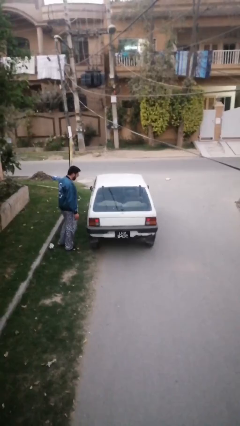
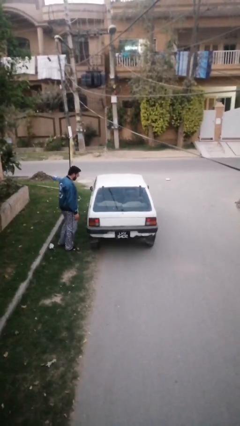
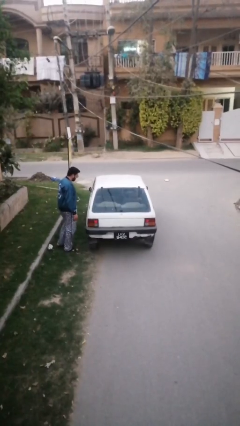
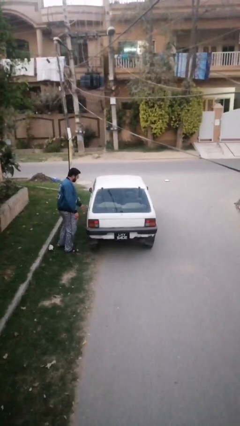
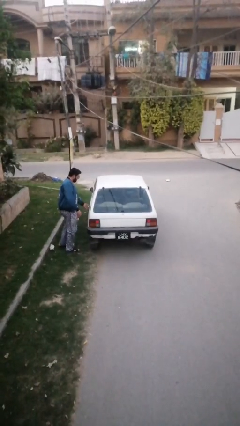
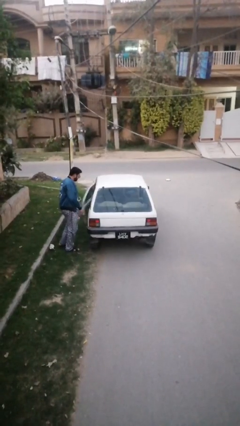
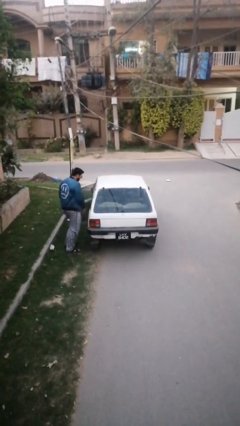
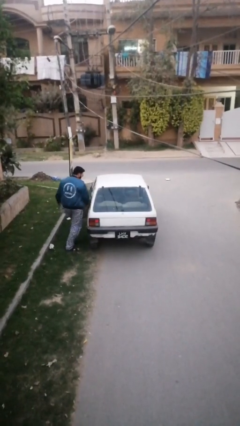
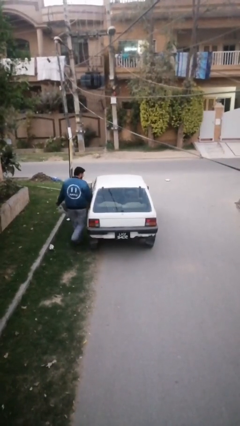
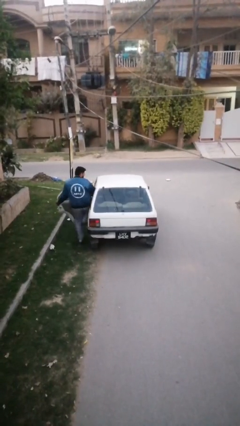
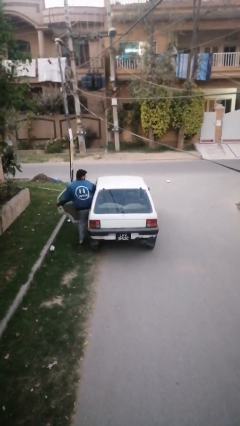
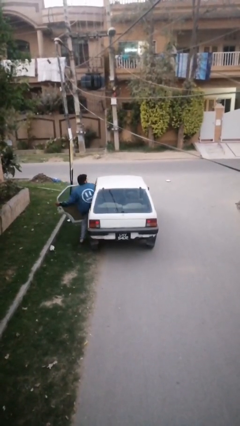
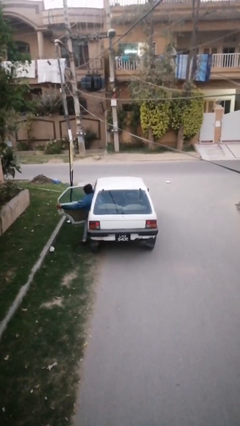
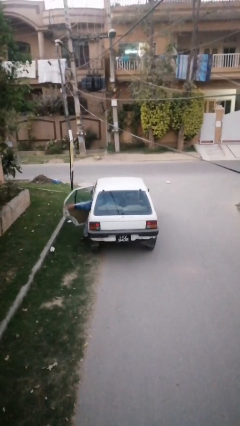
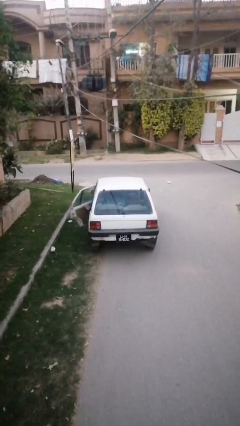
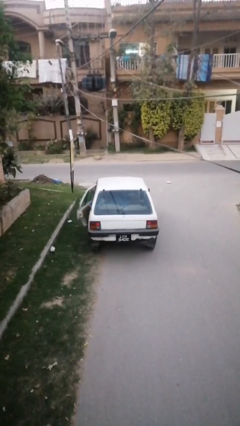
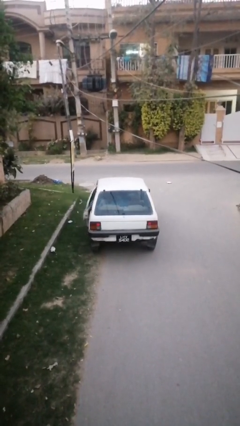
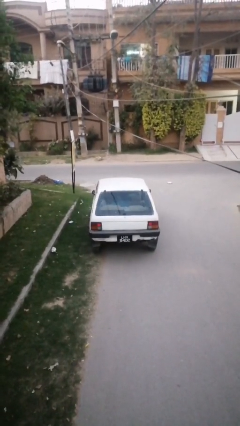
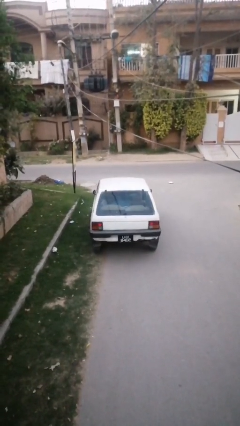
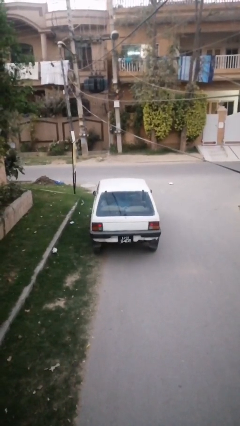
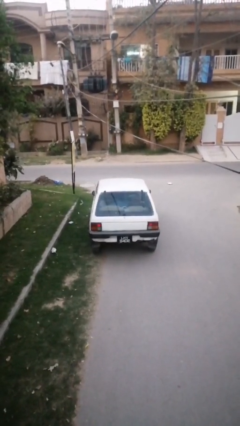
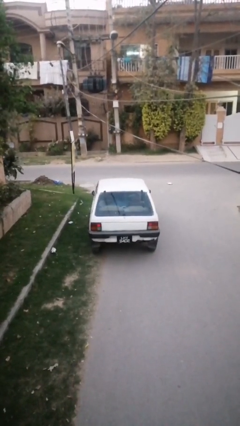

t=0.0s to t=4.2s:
car picks up person

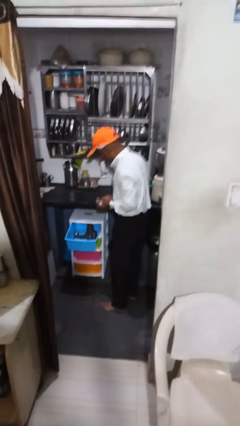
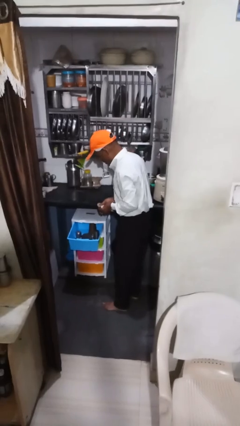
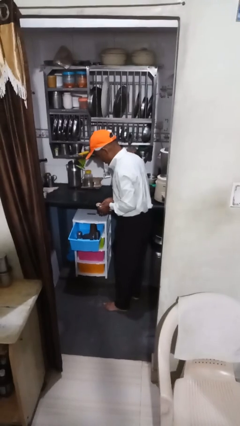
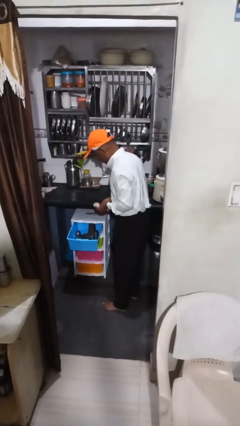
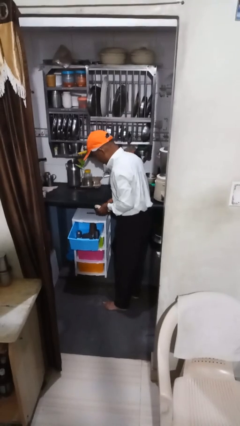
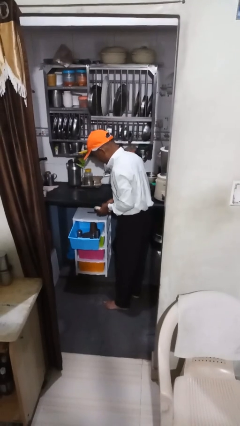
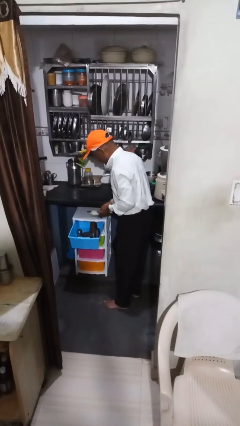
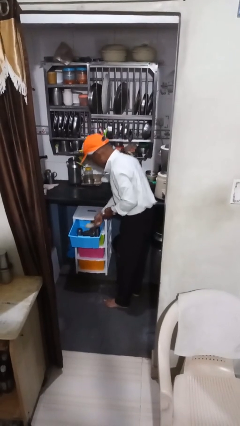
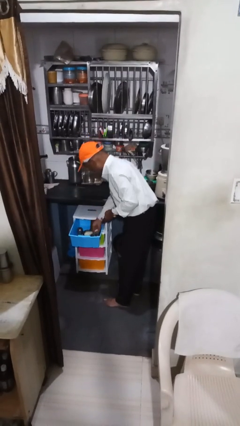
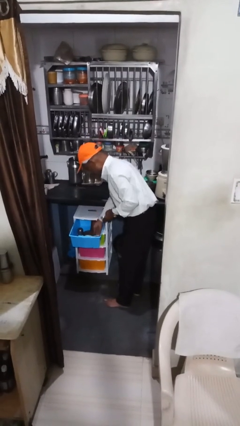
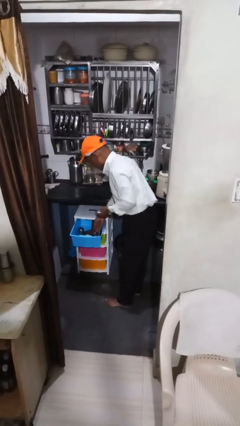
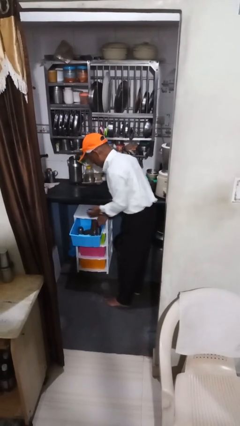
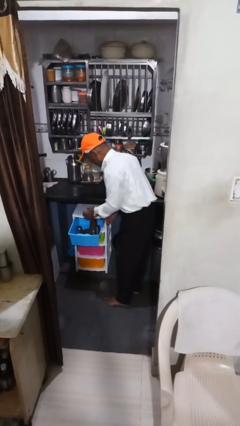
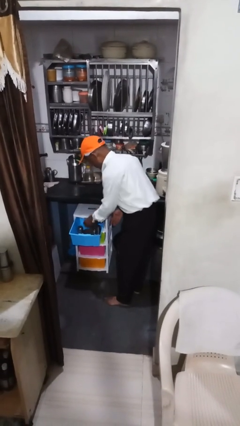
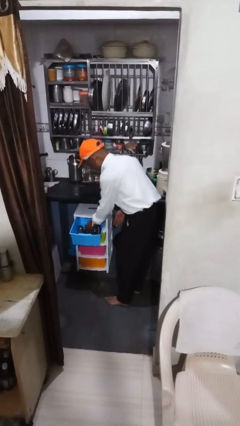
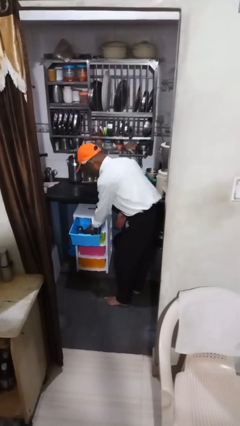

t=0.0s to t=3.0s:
person puts object into kitchen drawer

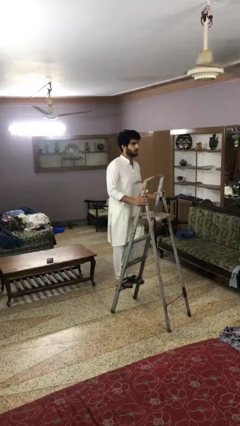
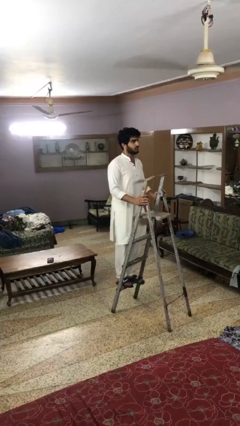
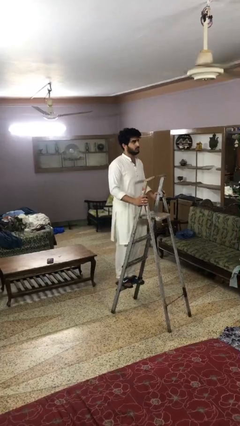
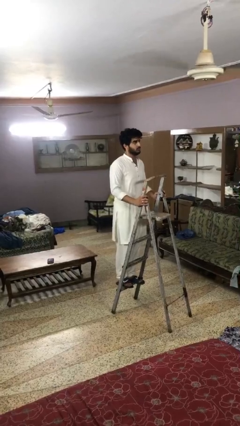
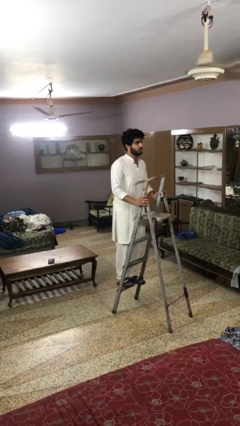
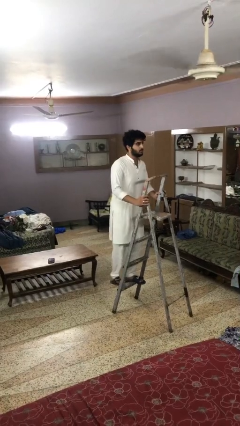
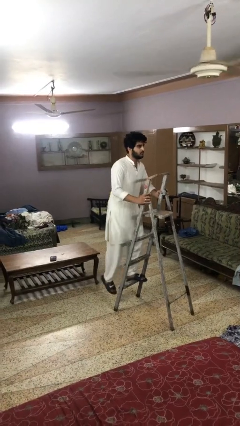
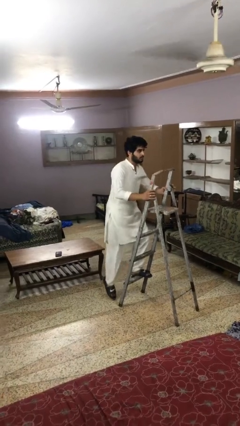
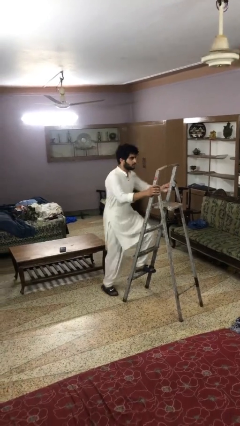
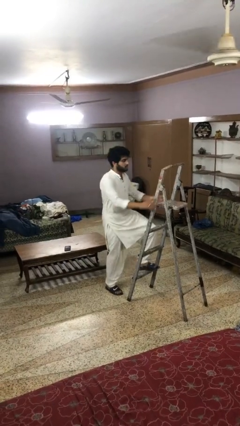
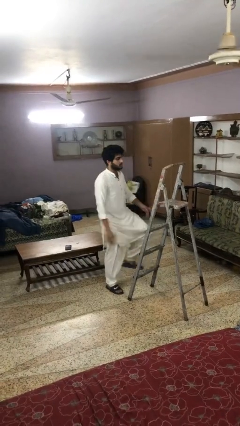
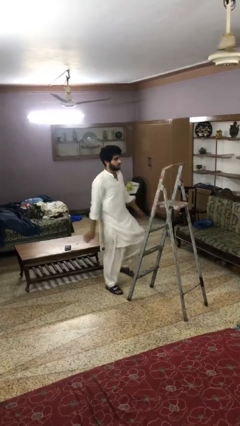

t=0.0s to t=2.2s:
person climbs down ladder

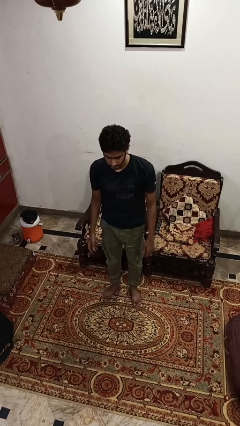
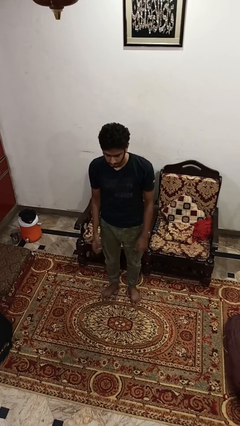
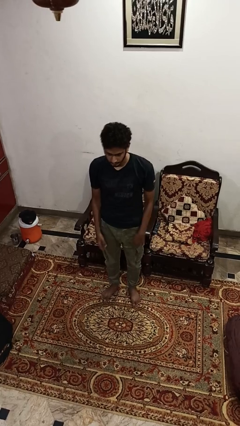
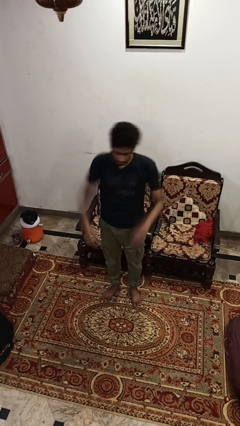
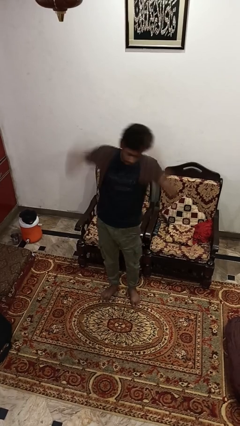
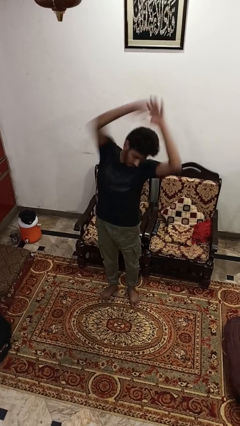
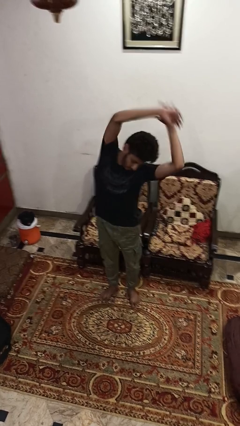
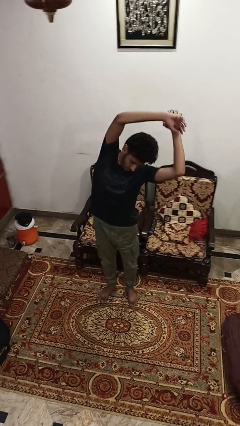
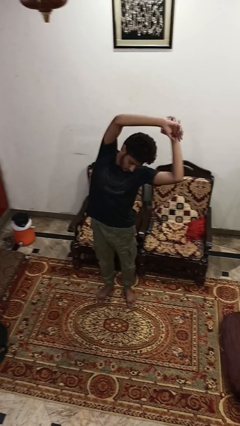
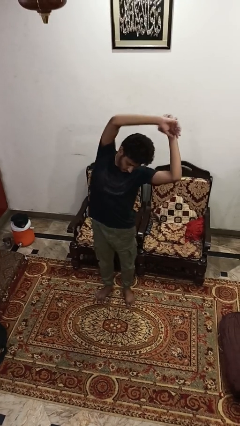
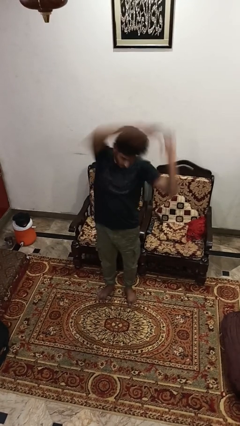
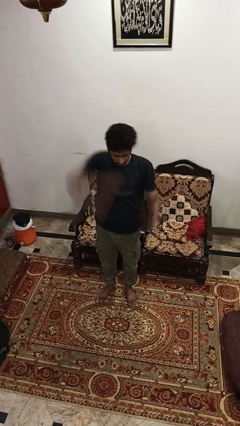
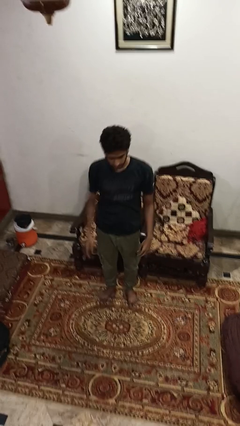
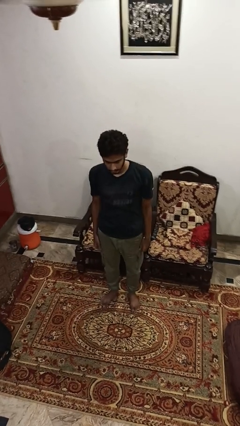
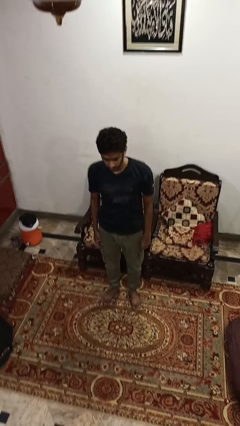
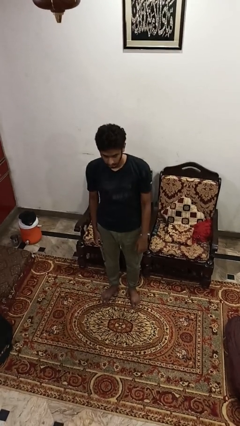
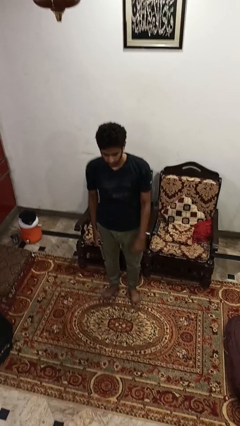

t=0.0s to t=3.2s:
person stretches arms to side

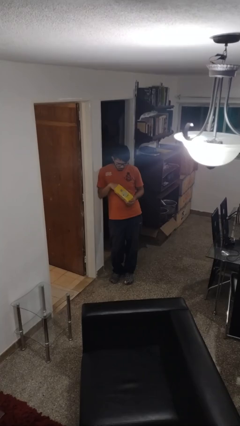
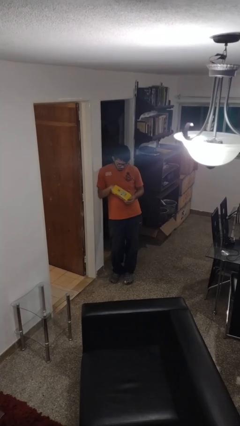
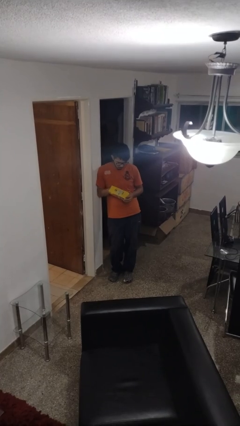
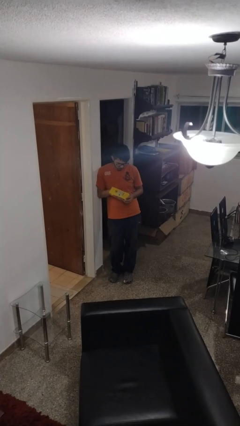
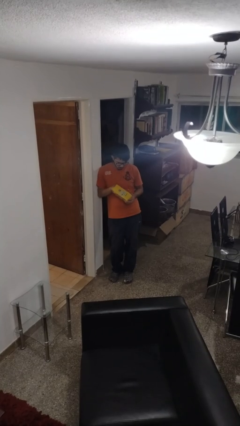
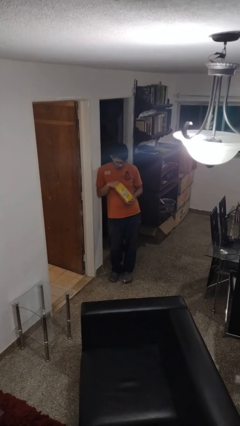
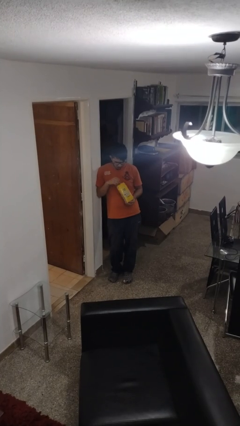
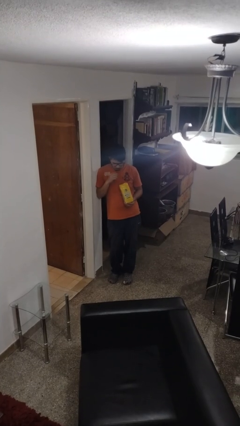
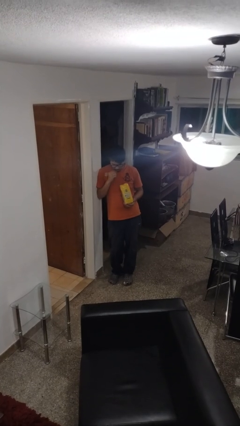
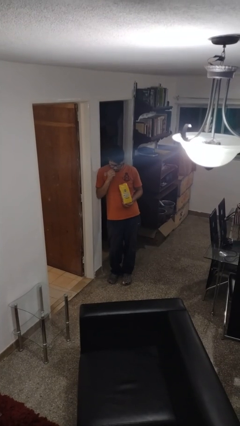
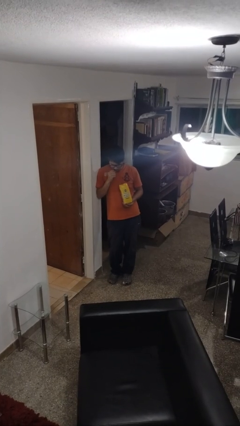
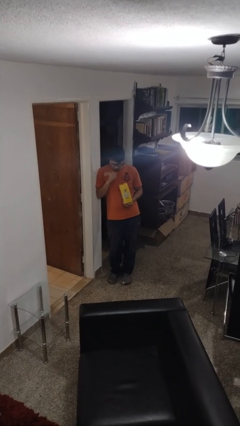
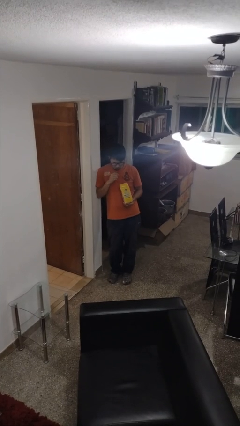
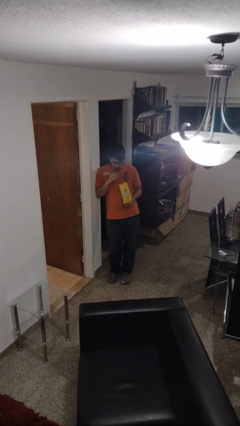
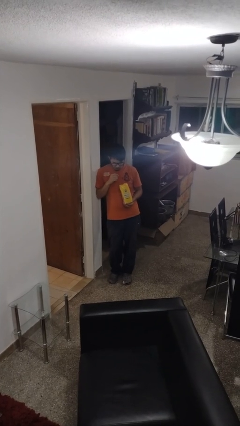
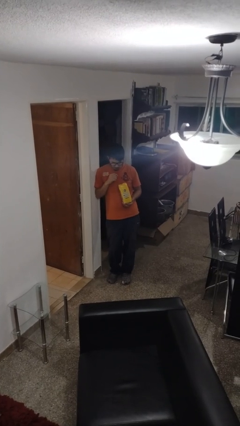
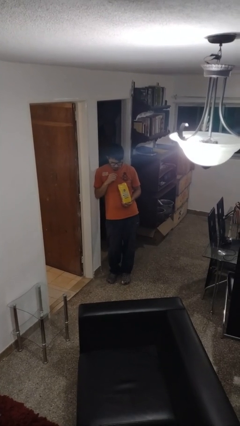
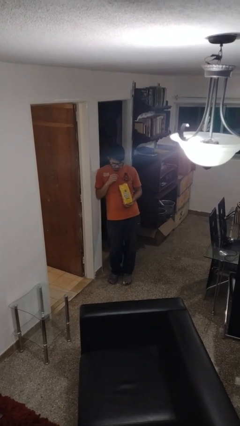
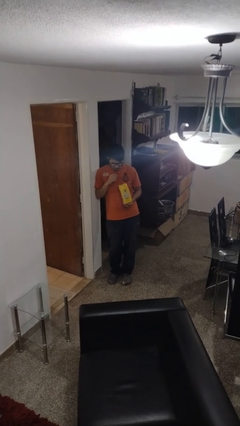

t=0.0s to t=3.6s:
person eats snack from bag

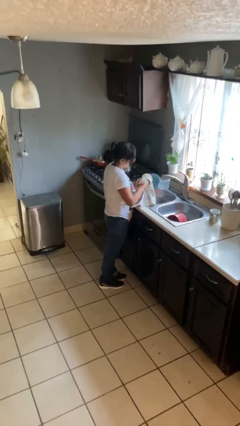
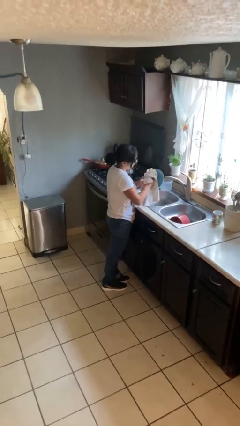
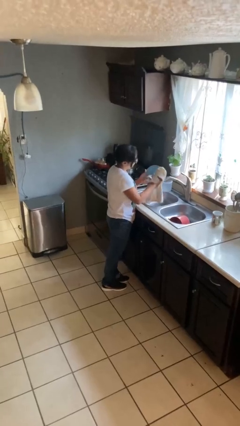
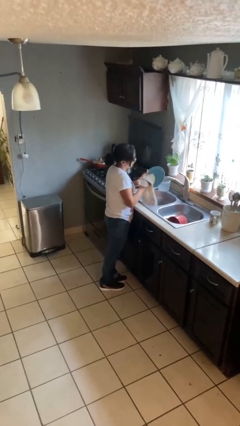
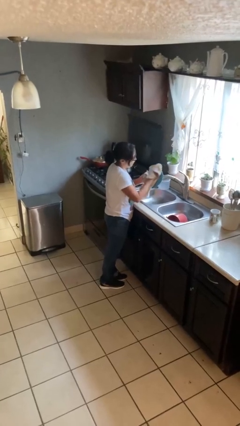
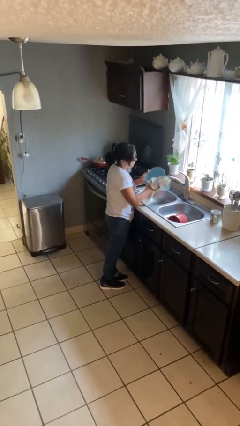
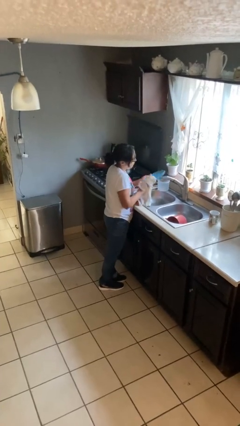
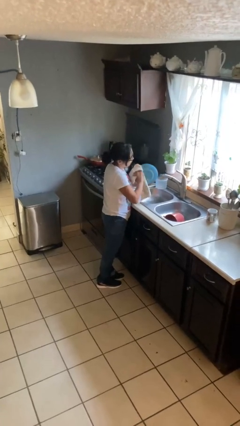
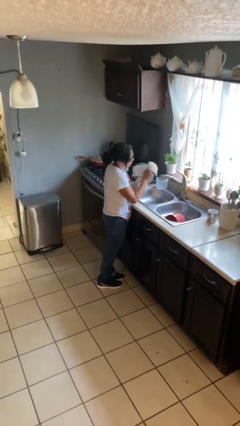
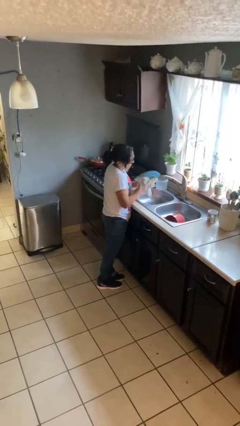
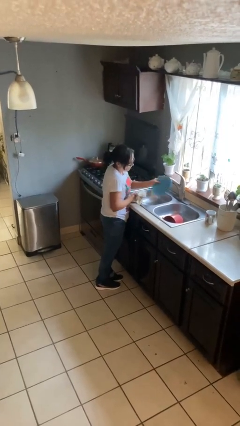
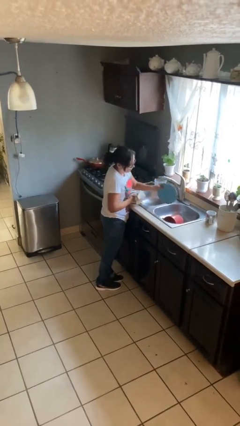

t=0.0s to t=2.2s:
person dries dish
